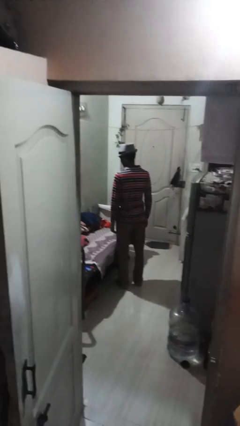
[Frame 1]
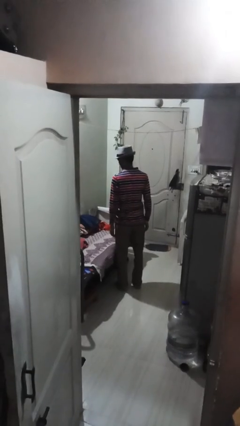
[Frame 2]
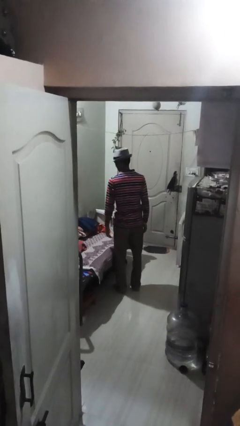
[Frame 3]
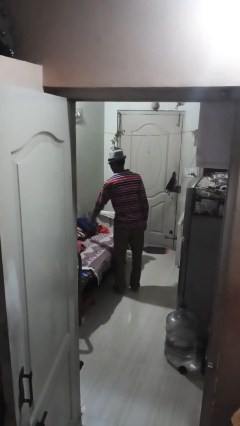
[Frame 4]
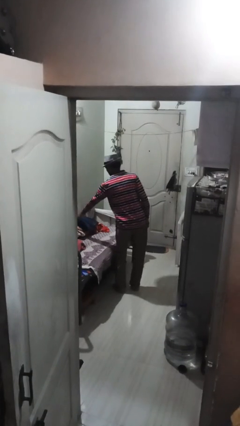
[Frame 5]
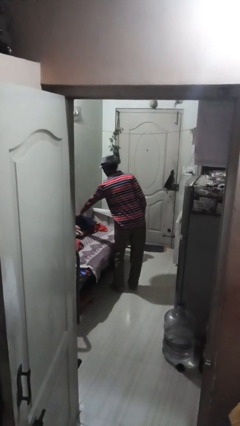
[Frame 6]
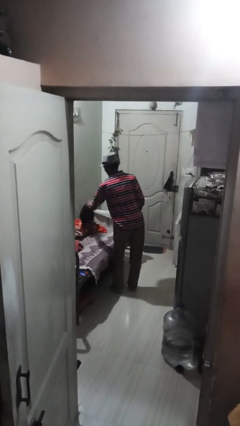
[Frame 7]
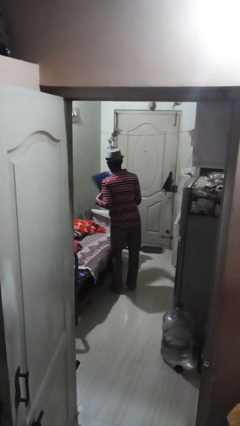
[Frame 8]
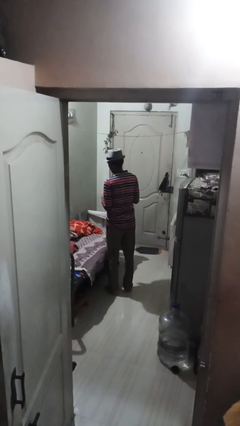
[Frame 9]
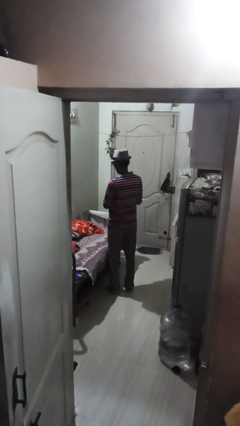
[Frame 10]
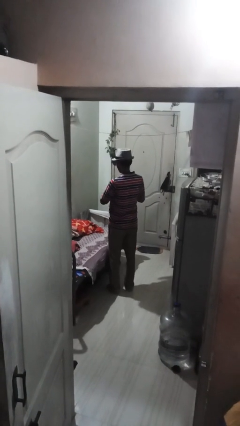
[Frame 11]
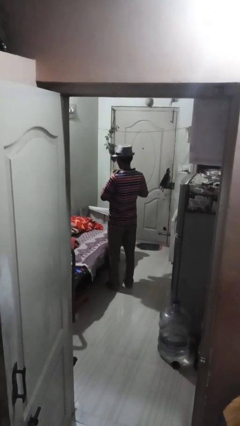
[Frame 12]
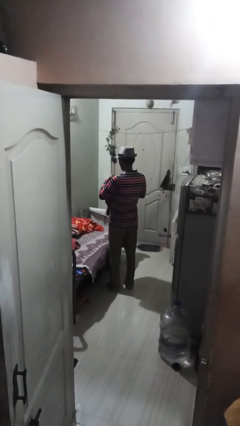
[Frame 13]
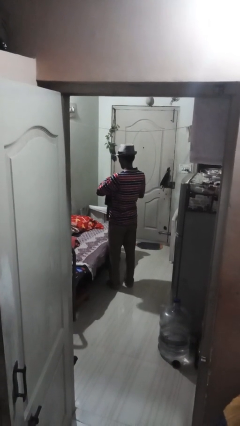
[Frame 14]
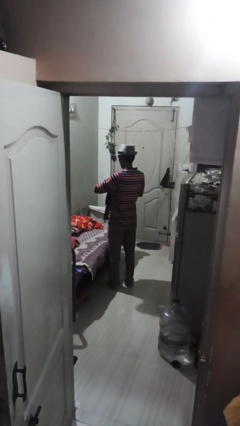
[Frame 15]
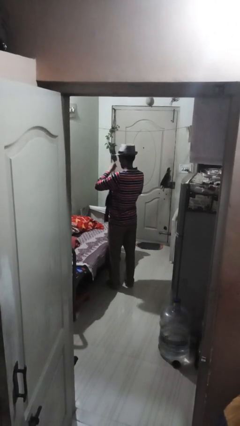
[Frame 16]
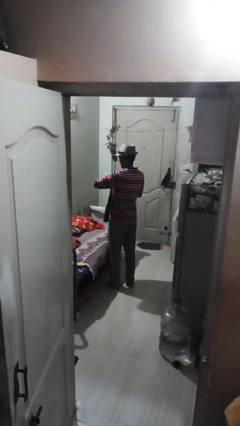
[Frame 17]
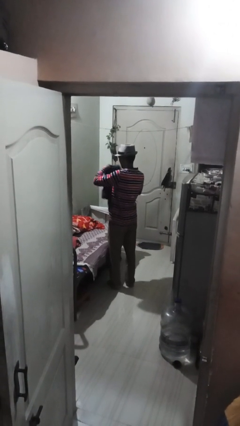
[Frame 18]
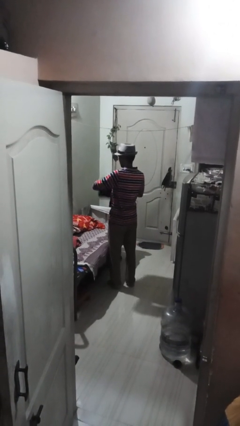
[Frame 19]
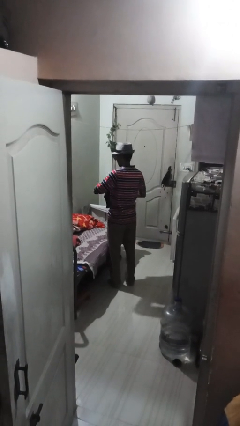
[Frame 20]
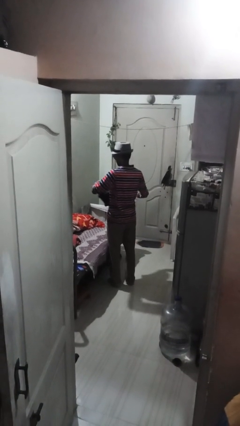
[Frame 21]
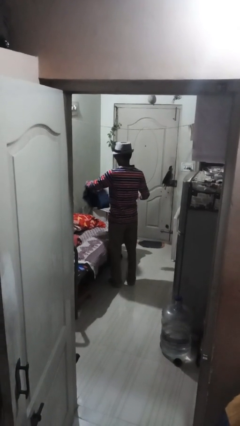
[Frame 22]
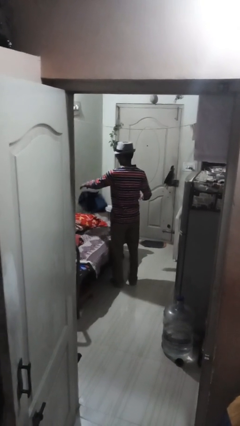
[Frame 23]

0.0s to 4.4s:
person folds pants

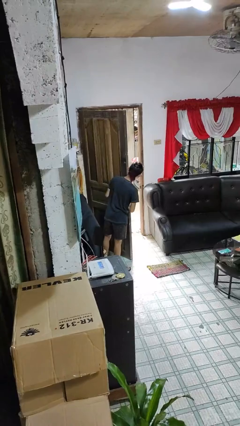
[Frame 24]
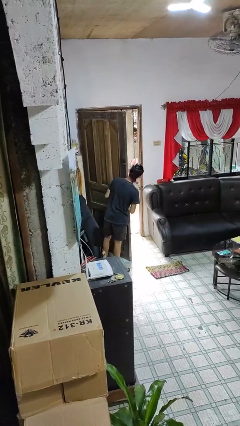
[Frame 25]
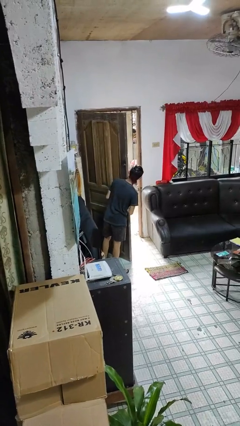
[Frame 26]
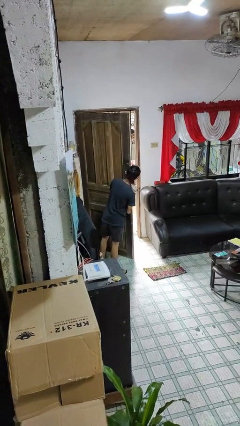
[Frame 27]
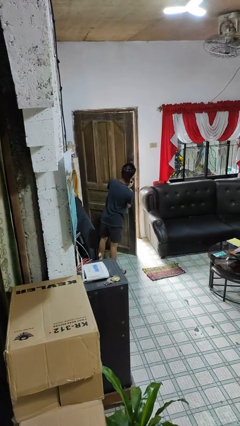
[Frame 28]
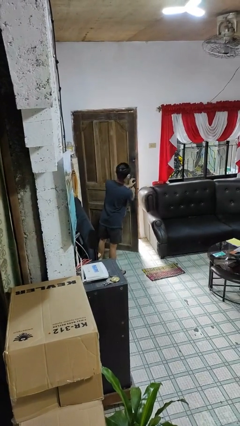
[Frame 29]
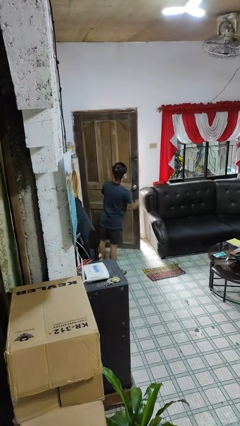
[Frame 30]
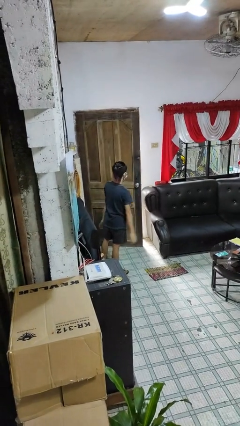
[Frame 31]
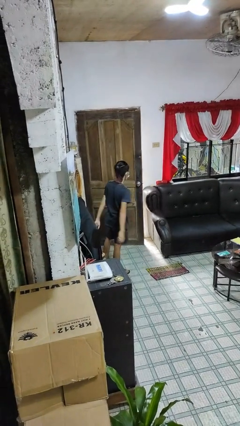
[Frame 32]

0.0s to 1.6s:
person closes facility door

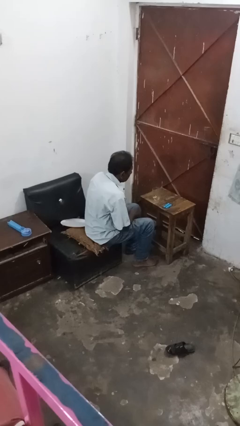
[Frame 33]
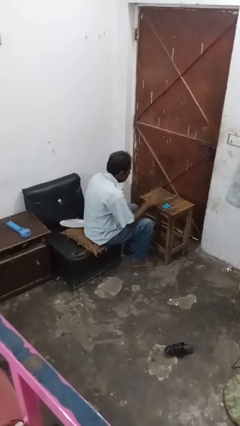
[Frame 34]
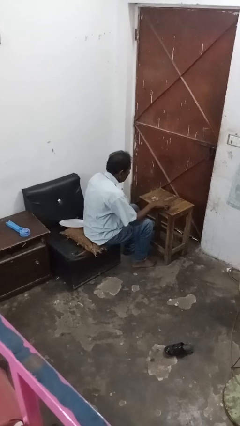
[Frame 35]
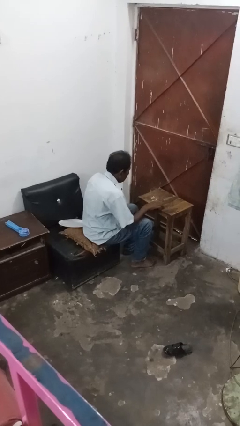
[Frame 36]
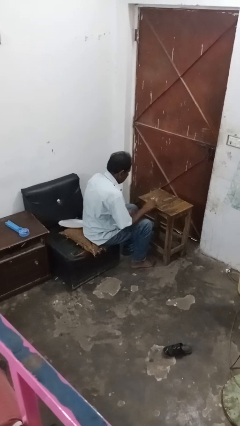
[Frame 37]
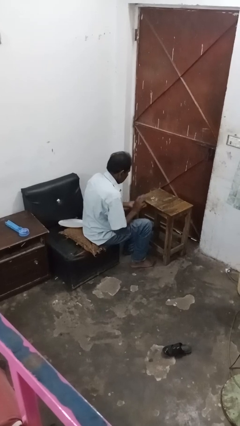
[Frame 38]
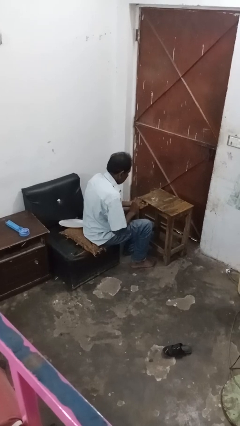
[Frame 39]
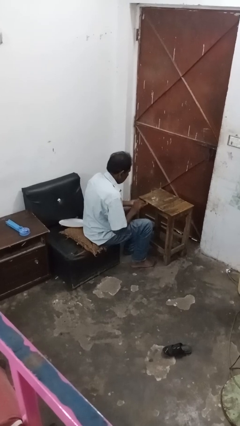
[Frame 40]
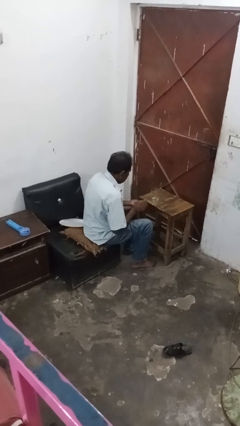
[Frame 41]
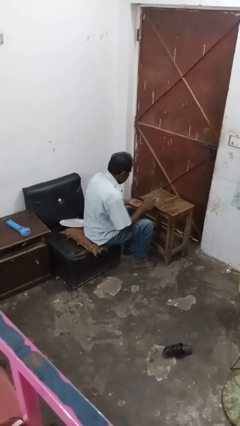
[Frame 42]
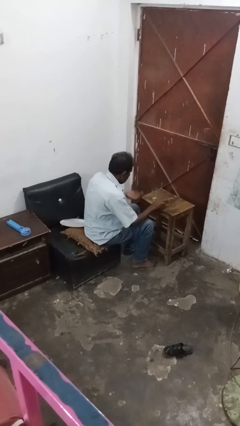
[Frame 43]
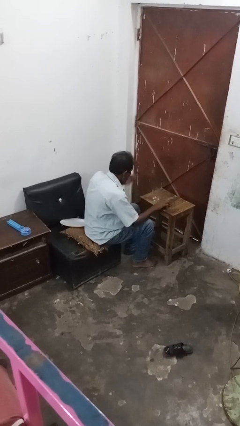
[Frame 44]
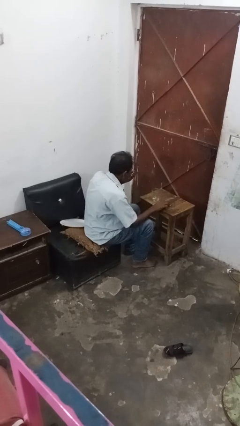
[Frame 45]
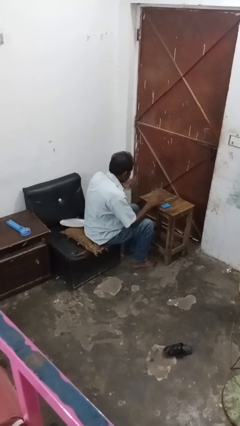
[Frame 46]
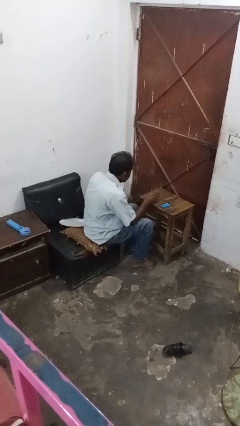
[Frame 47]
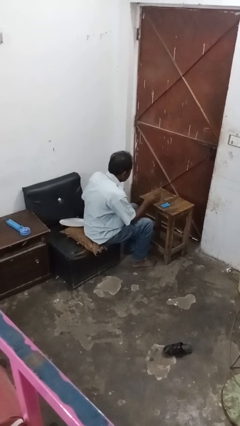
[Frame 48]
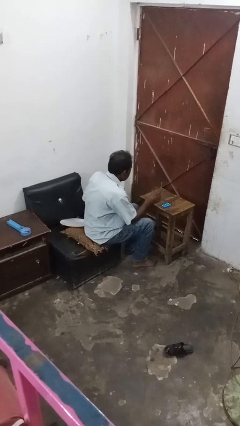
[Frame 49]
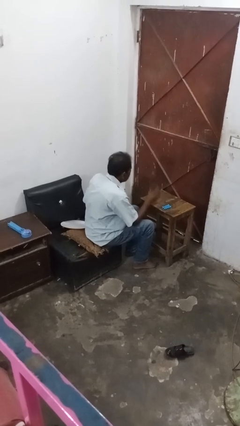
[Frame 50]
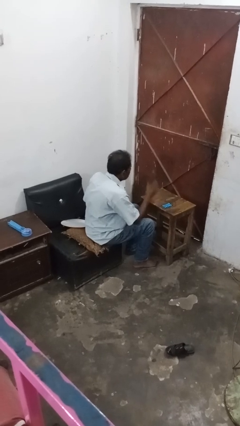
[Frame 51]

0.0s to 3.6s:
person takes medicine pills

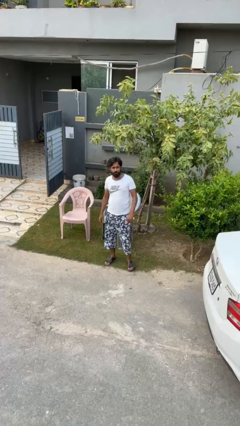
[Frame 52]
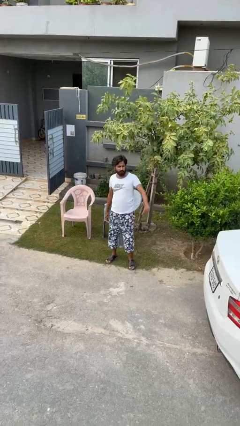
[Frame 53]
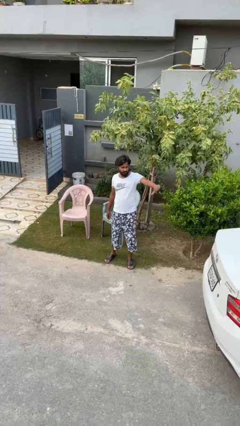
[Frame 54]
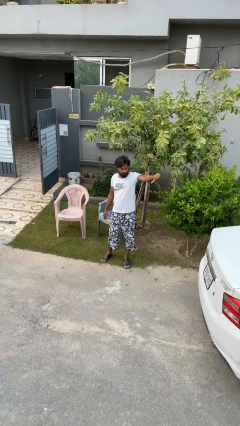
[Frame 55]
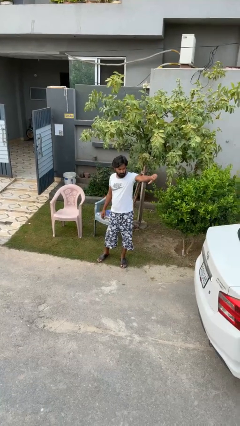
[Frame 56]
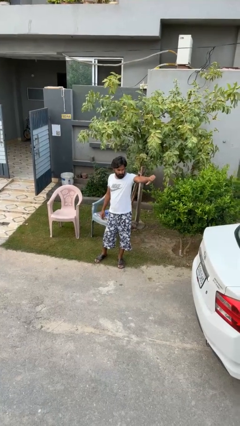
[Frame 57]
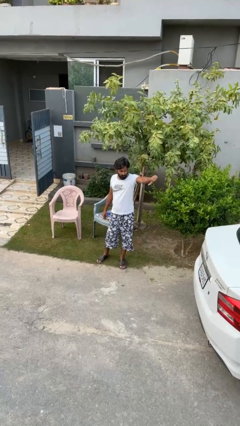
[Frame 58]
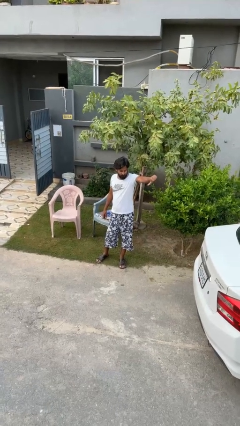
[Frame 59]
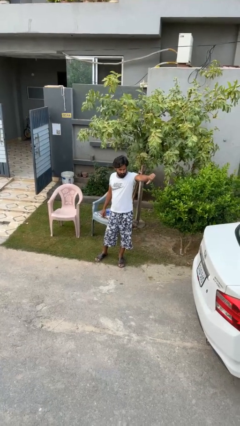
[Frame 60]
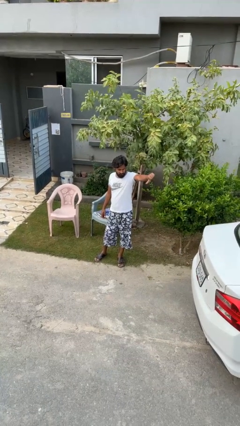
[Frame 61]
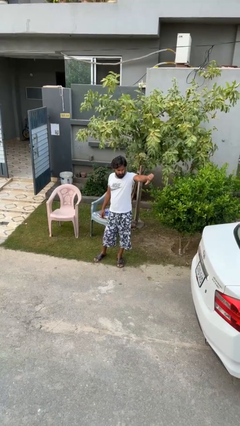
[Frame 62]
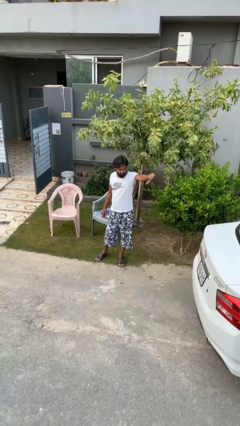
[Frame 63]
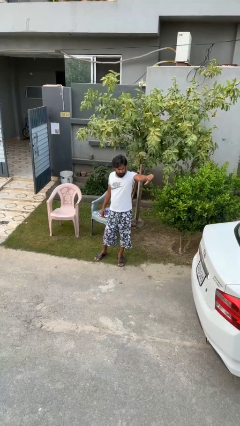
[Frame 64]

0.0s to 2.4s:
person gestures thumbs down

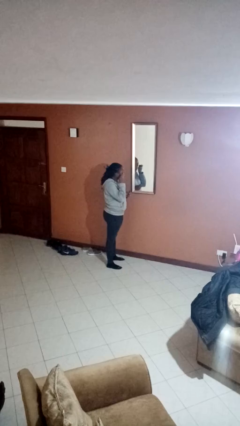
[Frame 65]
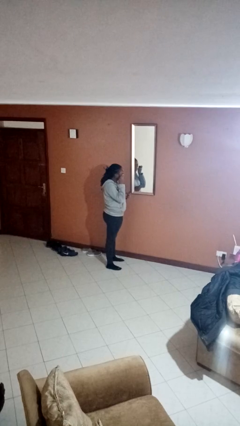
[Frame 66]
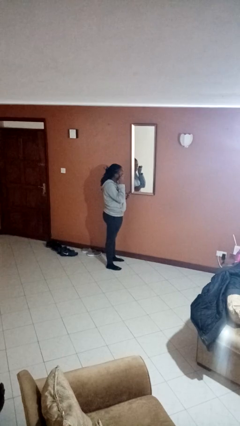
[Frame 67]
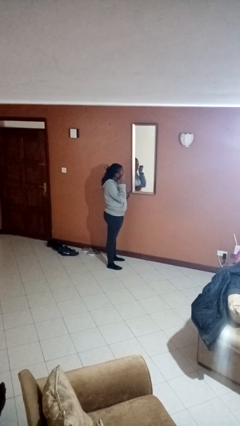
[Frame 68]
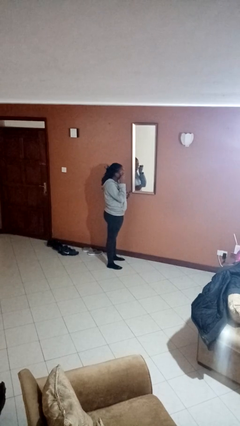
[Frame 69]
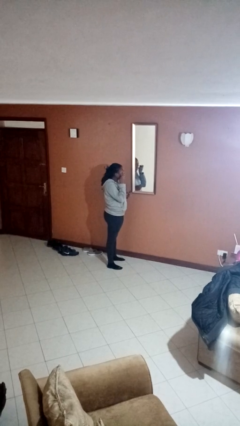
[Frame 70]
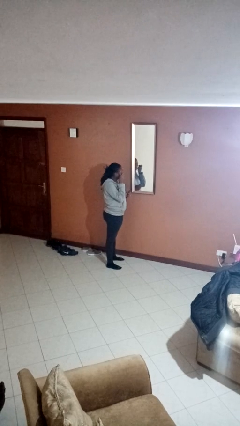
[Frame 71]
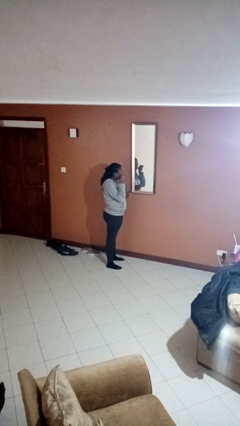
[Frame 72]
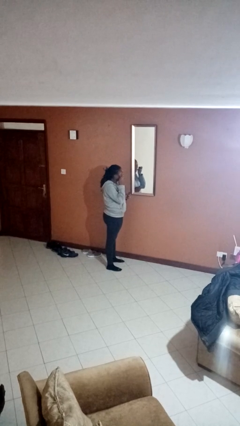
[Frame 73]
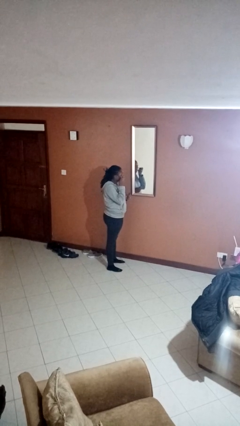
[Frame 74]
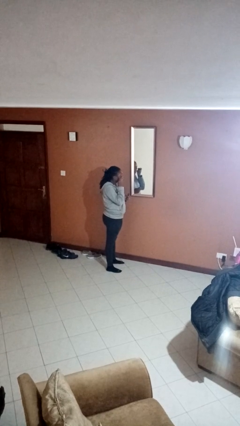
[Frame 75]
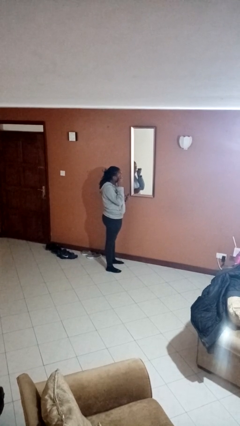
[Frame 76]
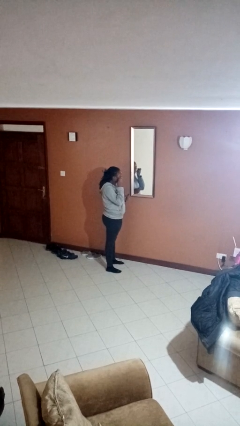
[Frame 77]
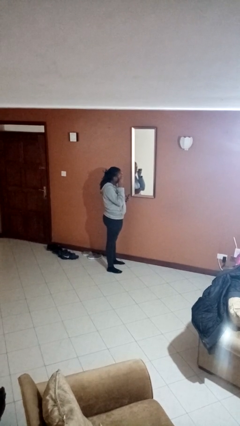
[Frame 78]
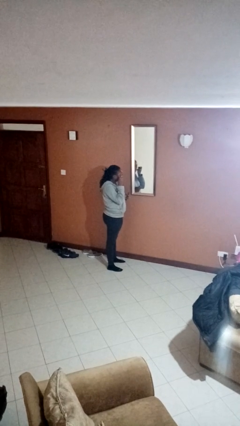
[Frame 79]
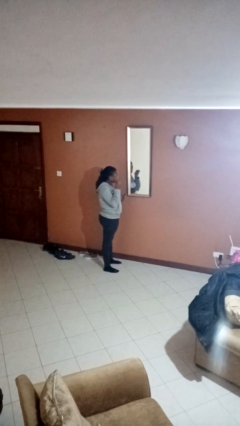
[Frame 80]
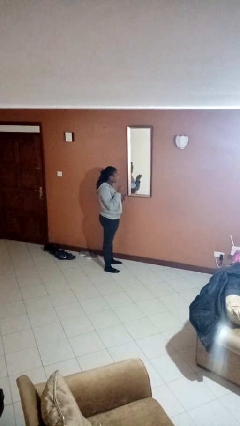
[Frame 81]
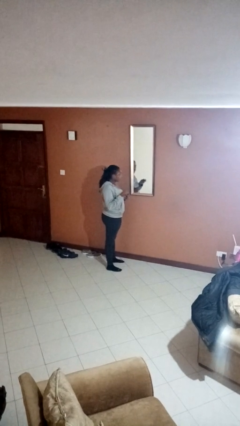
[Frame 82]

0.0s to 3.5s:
person applies eye makeup

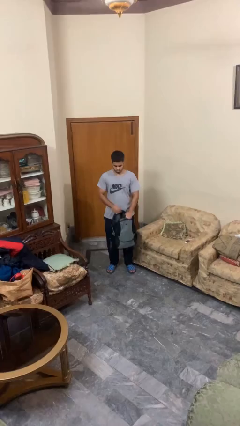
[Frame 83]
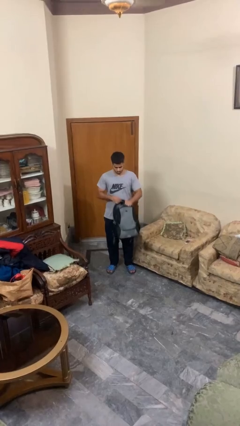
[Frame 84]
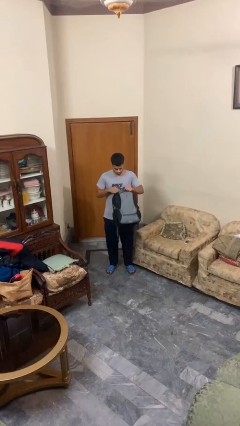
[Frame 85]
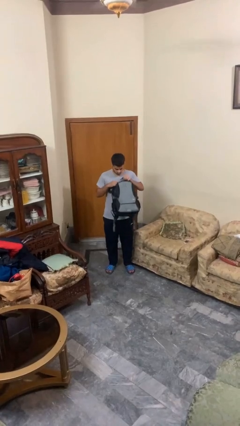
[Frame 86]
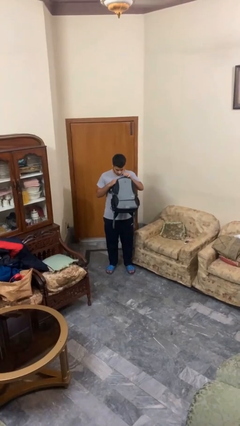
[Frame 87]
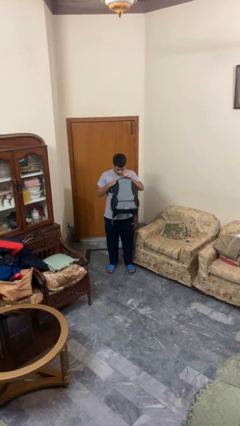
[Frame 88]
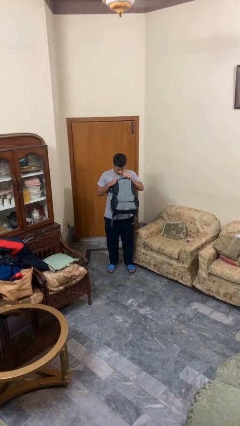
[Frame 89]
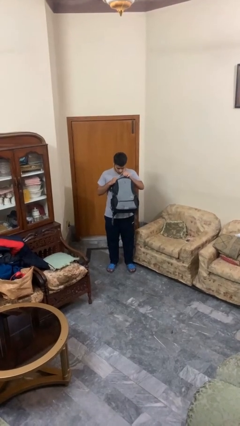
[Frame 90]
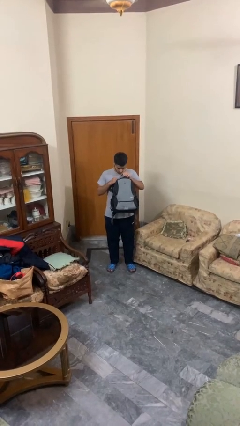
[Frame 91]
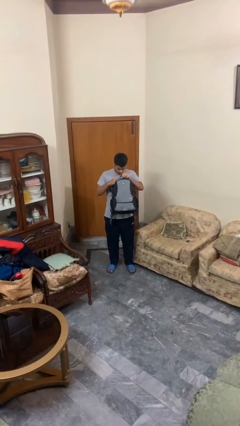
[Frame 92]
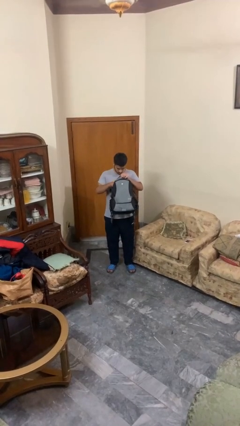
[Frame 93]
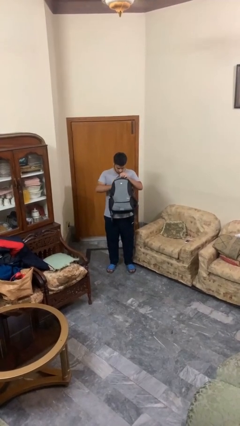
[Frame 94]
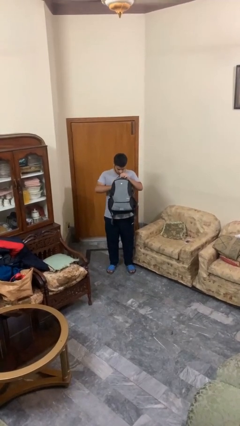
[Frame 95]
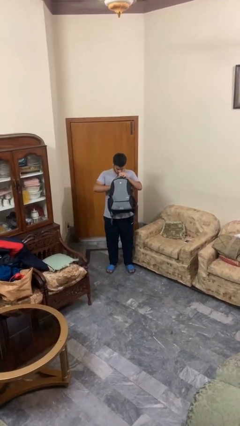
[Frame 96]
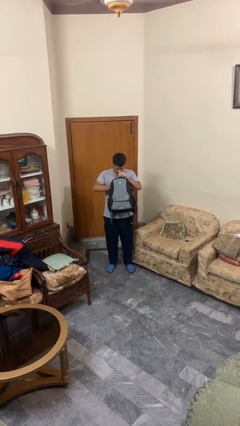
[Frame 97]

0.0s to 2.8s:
person searches in backpack
